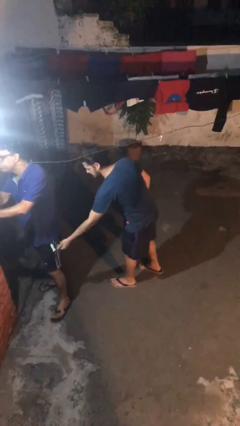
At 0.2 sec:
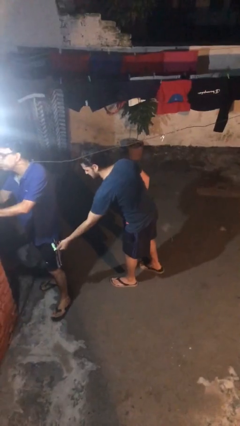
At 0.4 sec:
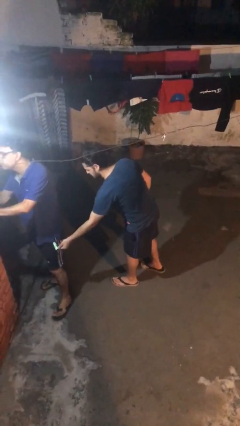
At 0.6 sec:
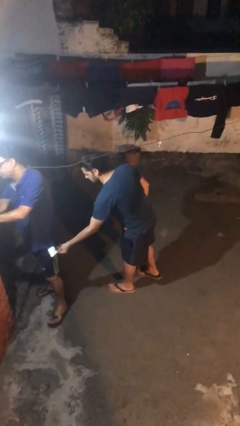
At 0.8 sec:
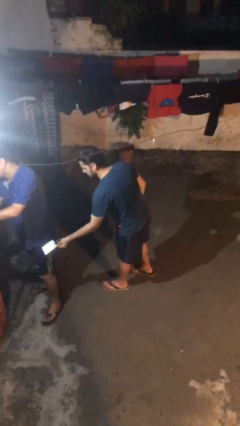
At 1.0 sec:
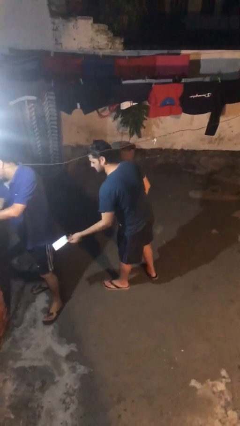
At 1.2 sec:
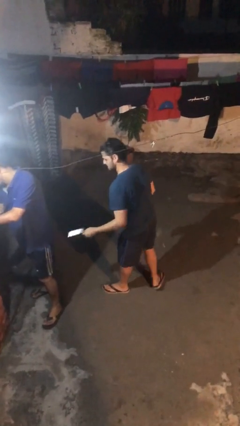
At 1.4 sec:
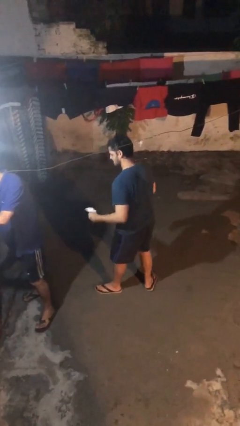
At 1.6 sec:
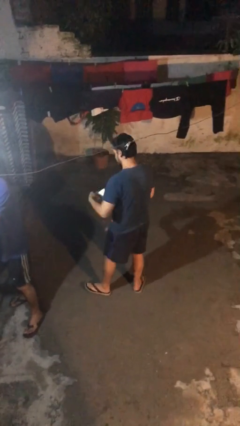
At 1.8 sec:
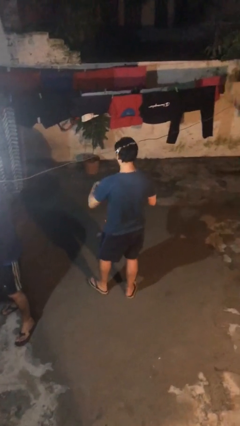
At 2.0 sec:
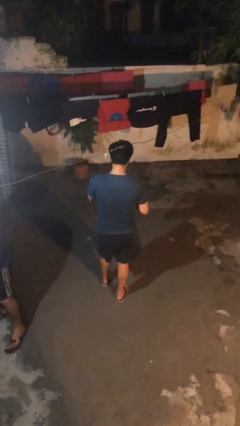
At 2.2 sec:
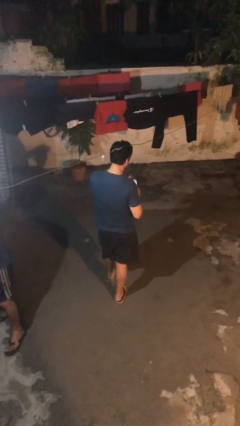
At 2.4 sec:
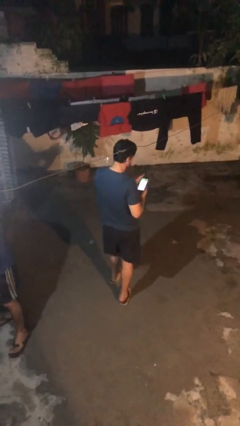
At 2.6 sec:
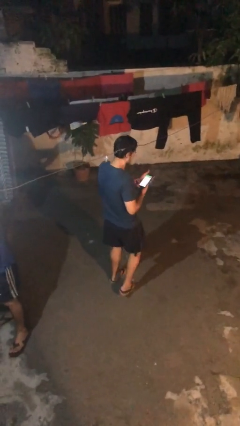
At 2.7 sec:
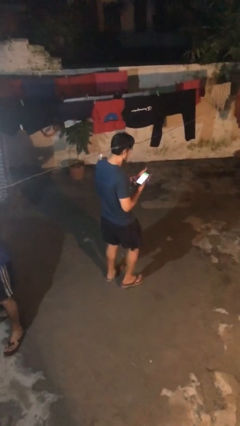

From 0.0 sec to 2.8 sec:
person steals object from person
